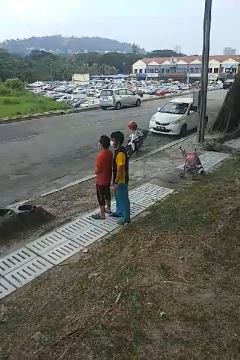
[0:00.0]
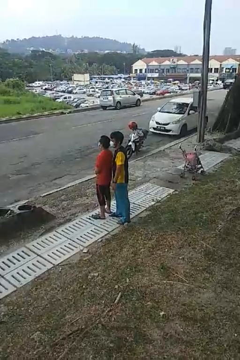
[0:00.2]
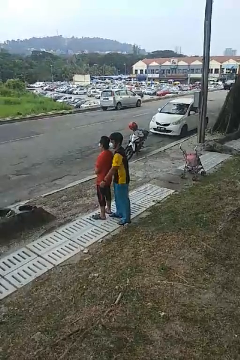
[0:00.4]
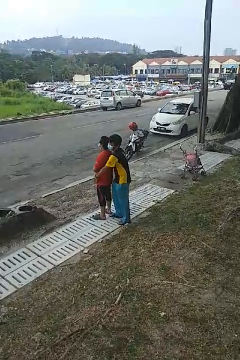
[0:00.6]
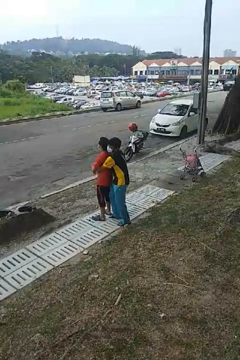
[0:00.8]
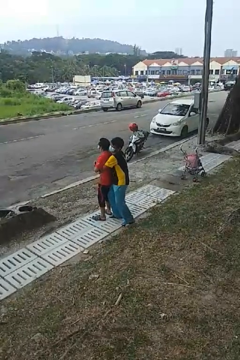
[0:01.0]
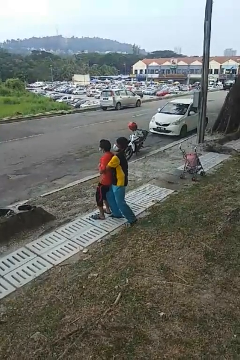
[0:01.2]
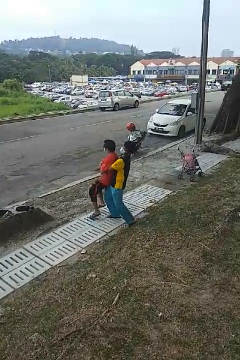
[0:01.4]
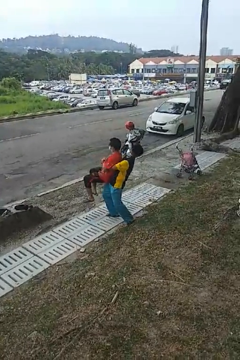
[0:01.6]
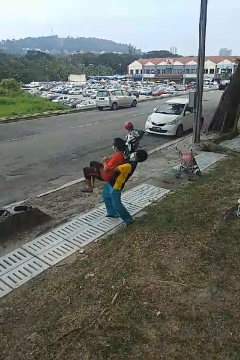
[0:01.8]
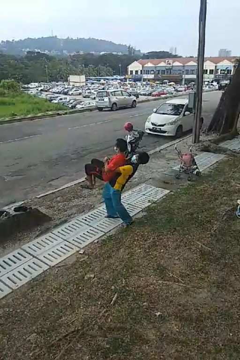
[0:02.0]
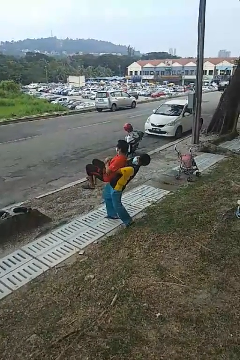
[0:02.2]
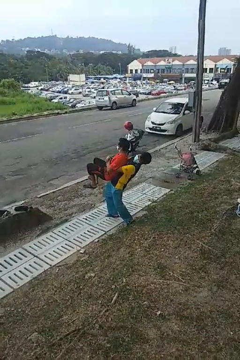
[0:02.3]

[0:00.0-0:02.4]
person picks up person

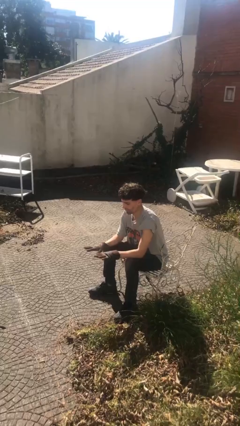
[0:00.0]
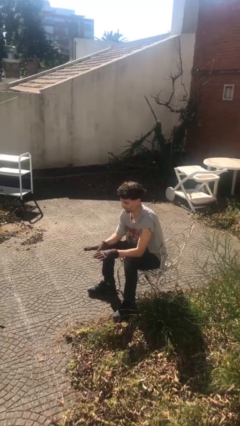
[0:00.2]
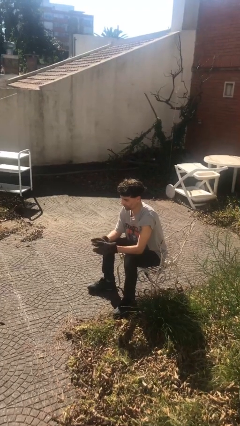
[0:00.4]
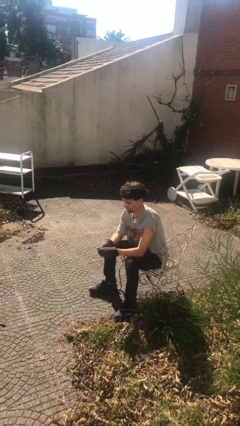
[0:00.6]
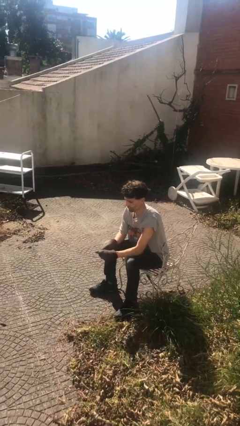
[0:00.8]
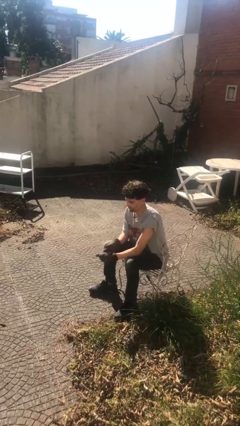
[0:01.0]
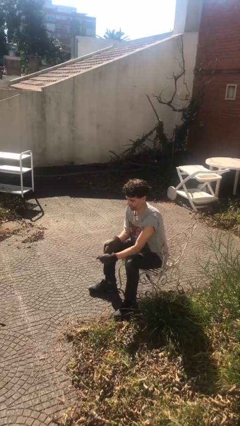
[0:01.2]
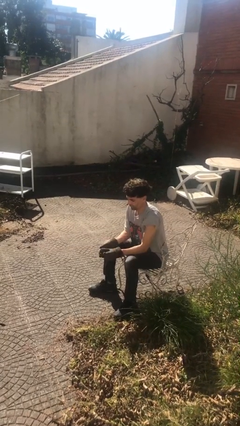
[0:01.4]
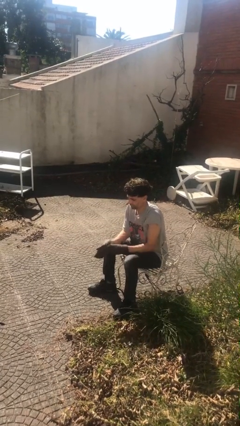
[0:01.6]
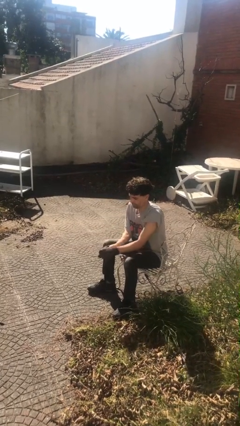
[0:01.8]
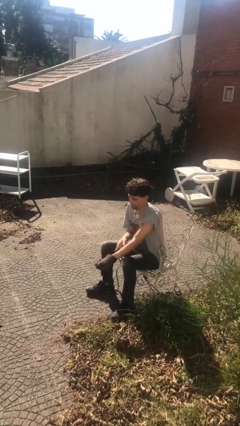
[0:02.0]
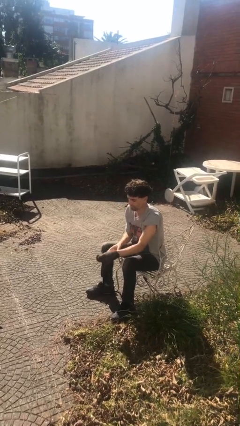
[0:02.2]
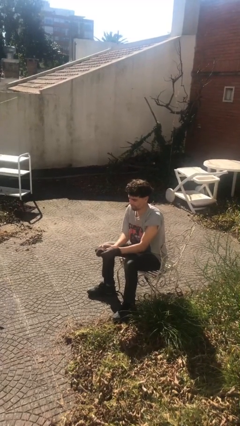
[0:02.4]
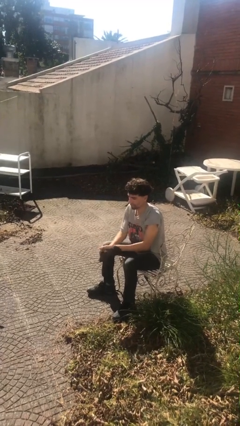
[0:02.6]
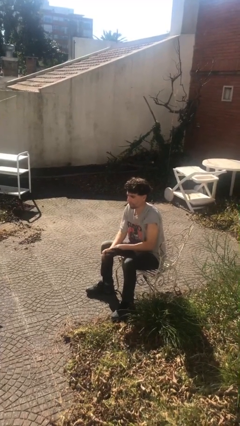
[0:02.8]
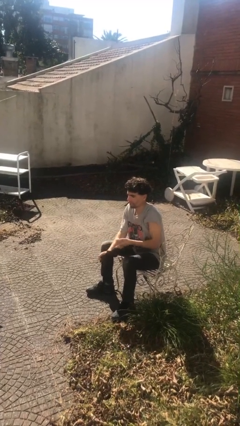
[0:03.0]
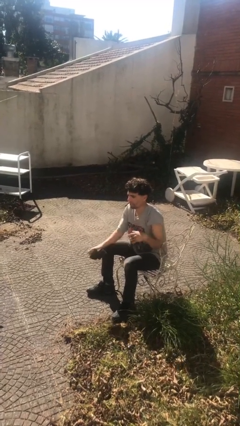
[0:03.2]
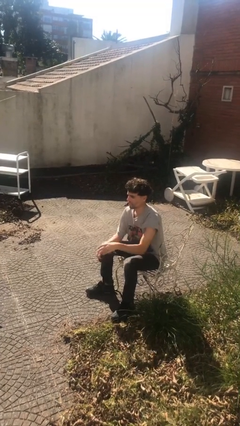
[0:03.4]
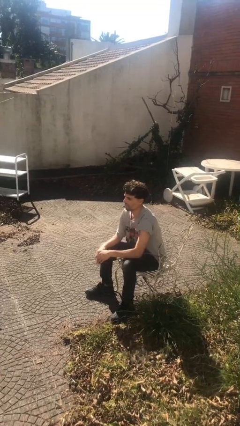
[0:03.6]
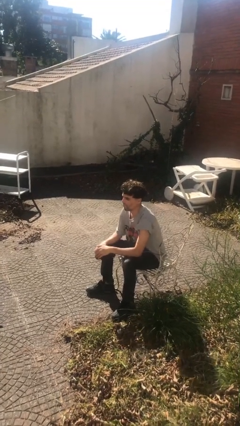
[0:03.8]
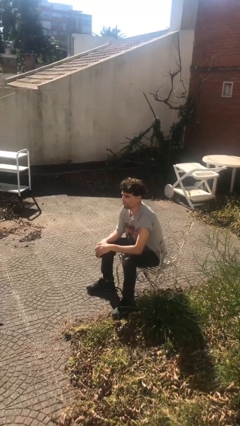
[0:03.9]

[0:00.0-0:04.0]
person takes off gloves

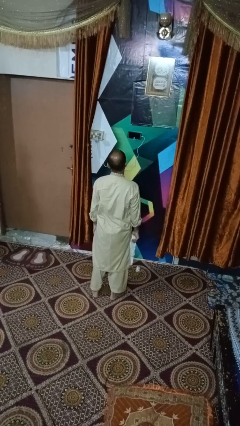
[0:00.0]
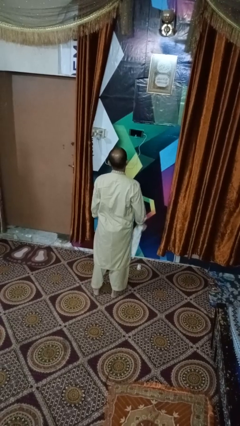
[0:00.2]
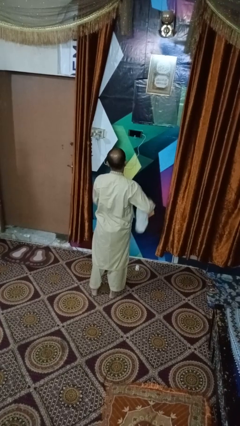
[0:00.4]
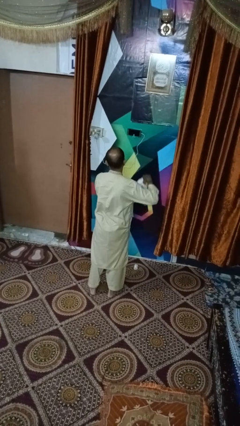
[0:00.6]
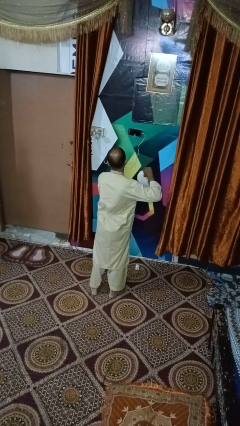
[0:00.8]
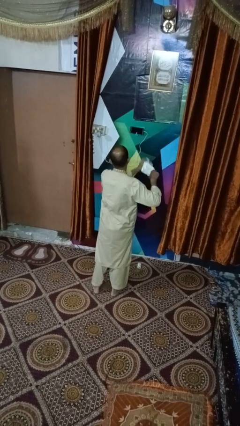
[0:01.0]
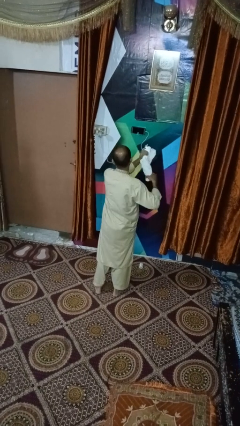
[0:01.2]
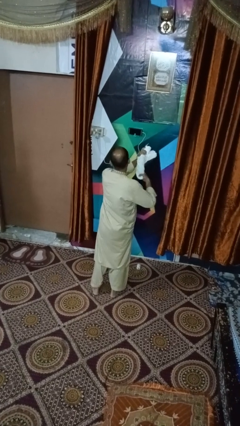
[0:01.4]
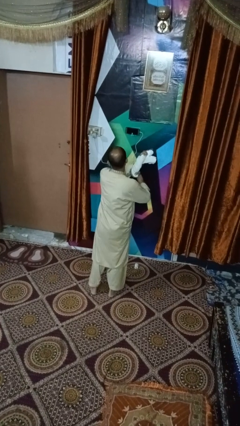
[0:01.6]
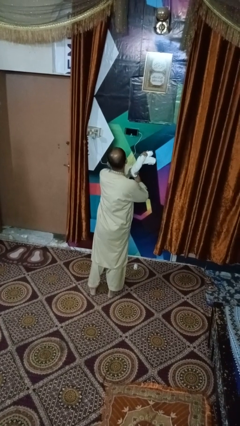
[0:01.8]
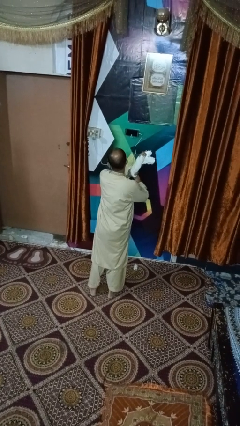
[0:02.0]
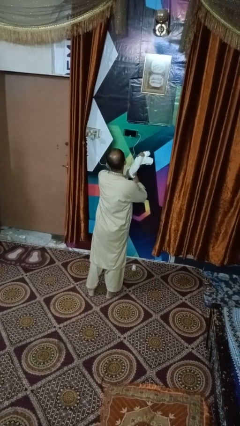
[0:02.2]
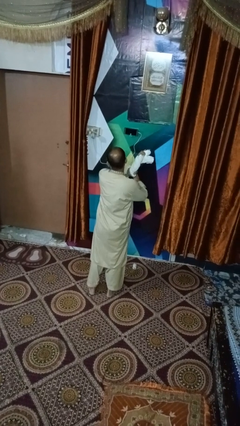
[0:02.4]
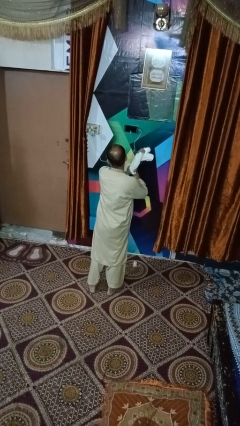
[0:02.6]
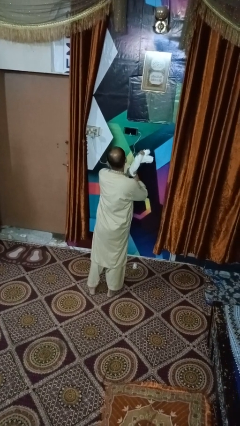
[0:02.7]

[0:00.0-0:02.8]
person squeezes object

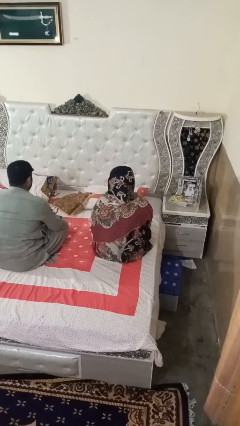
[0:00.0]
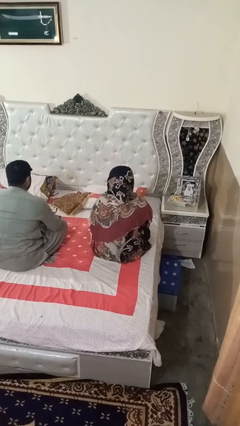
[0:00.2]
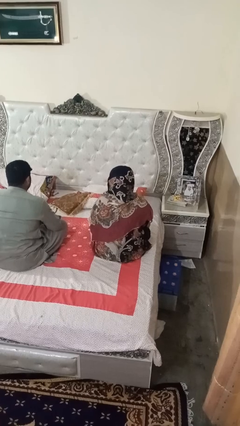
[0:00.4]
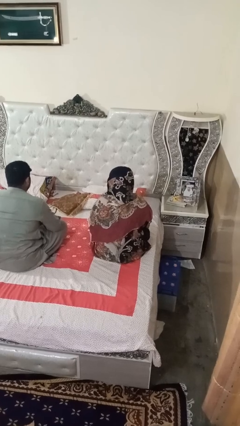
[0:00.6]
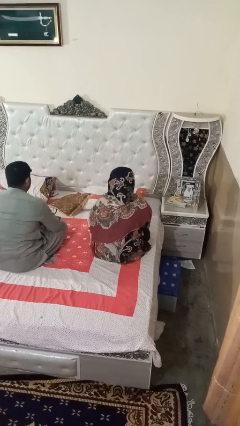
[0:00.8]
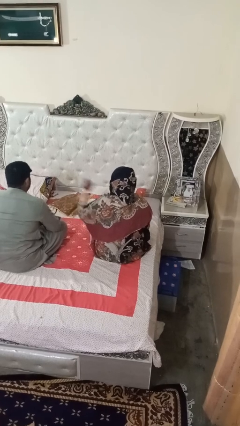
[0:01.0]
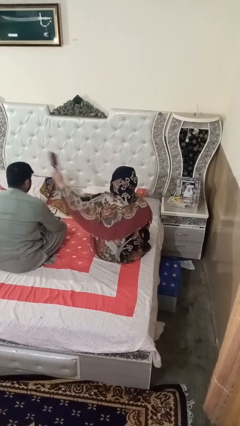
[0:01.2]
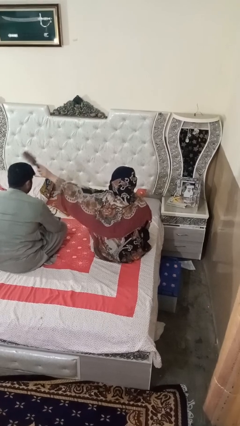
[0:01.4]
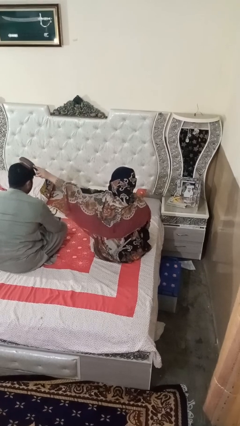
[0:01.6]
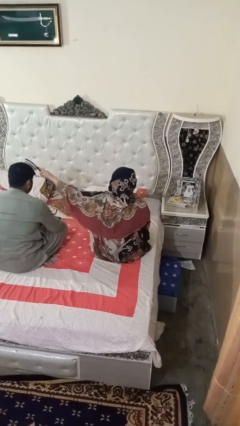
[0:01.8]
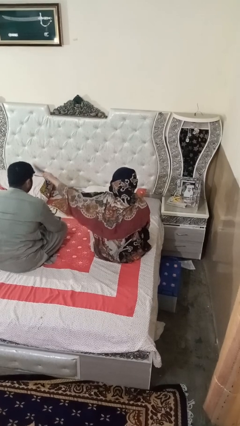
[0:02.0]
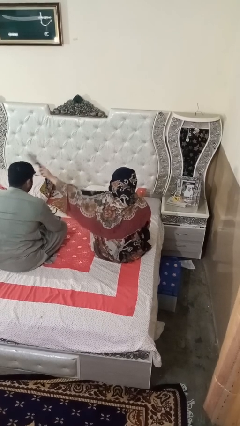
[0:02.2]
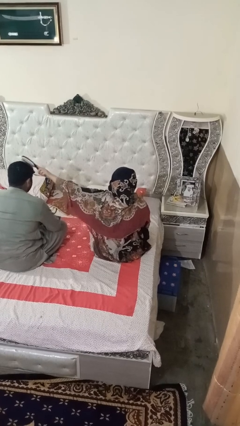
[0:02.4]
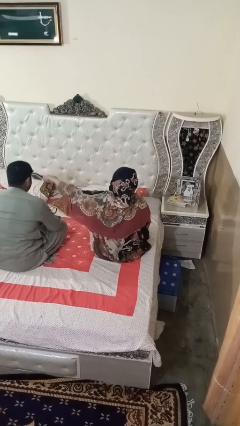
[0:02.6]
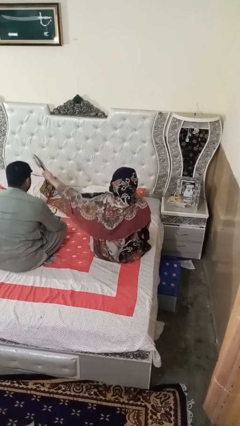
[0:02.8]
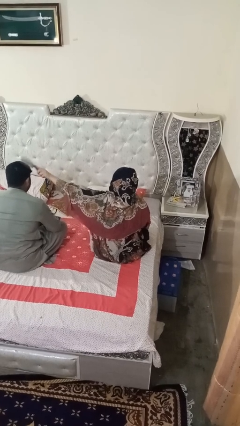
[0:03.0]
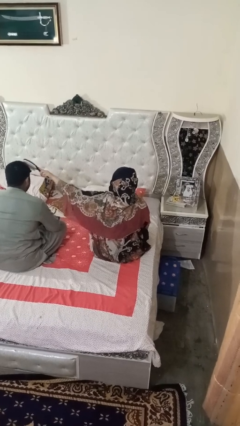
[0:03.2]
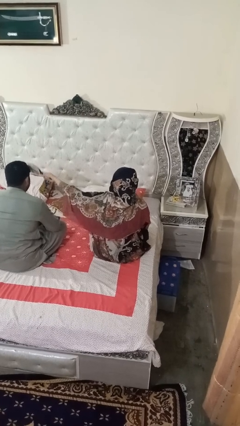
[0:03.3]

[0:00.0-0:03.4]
person brushes hair of person

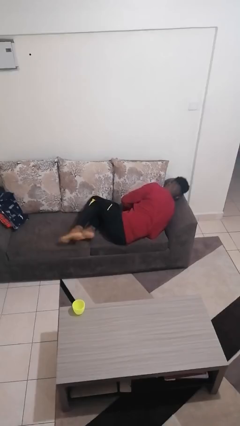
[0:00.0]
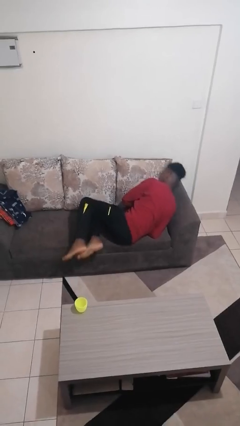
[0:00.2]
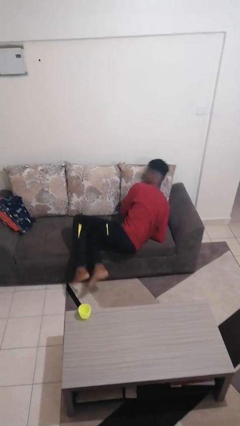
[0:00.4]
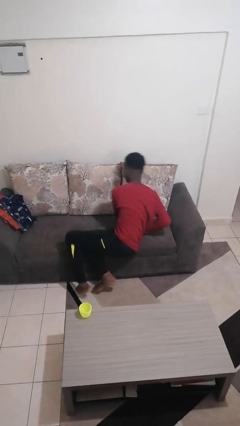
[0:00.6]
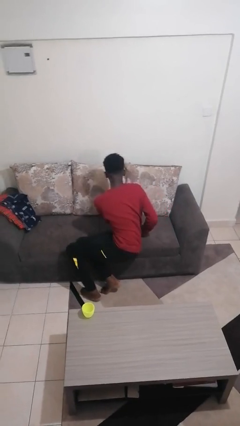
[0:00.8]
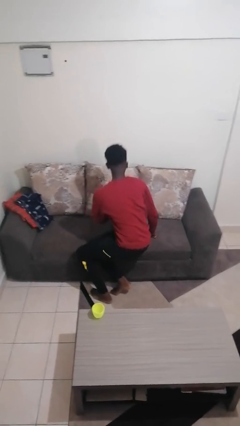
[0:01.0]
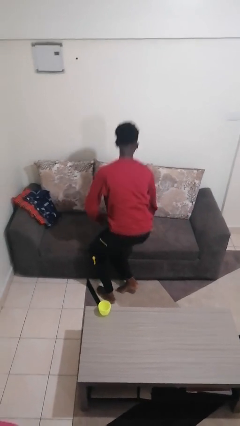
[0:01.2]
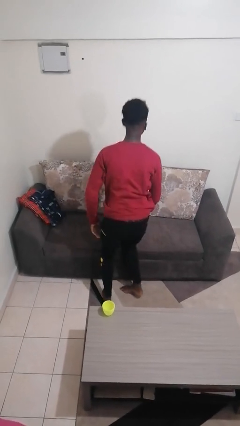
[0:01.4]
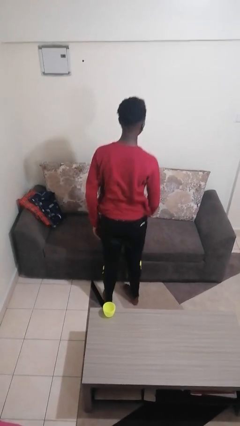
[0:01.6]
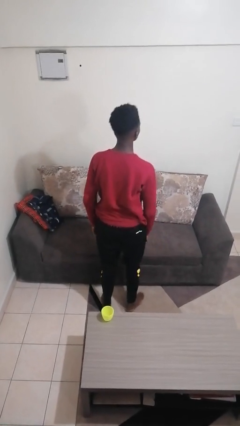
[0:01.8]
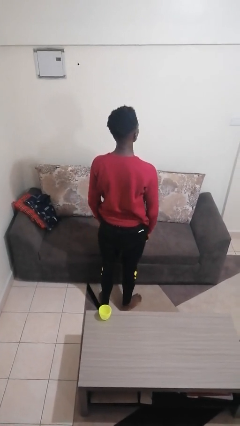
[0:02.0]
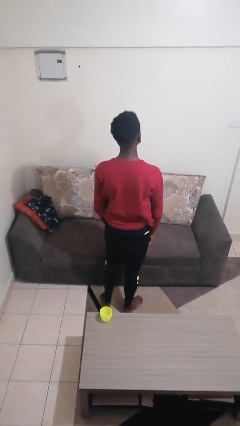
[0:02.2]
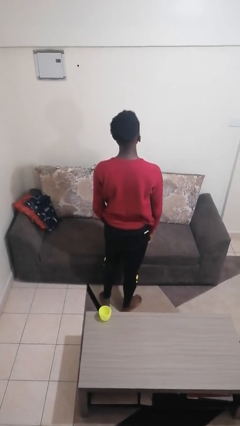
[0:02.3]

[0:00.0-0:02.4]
person stands up

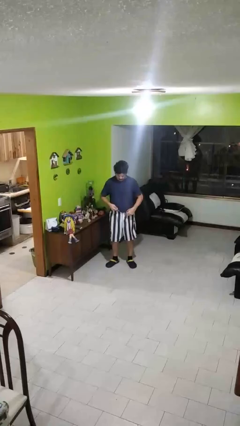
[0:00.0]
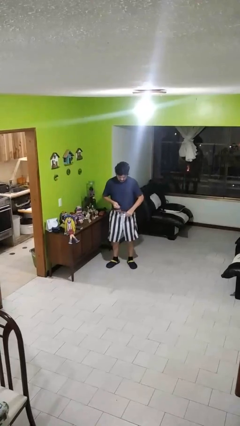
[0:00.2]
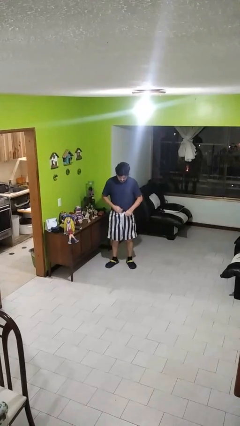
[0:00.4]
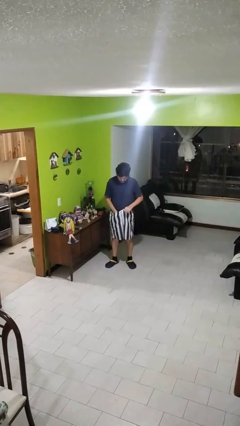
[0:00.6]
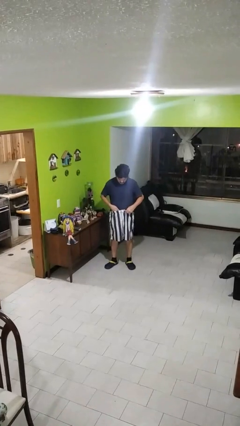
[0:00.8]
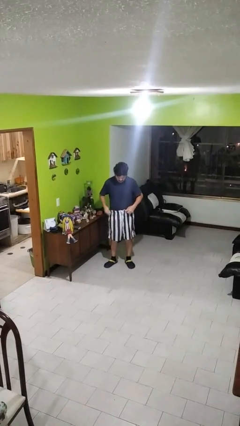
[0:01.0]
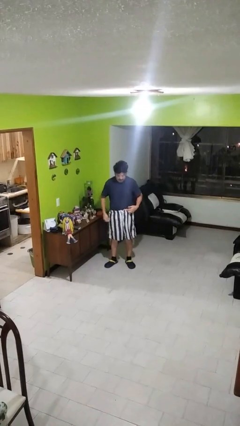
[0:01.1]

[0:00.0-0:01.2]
person tucks in shirt

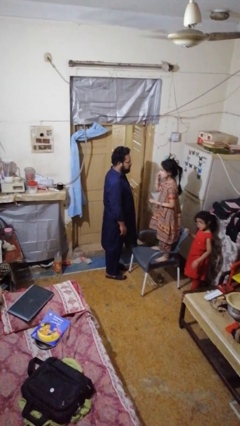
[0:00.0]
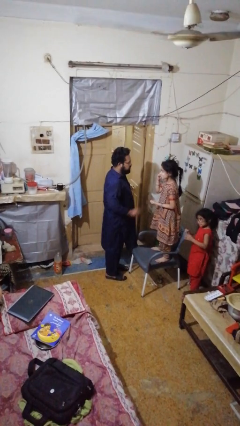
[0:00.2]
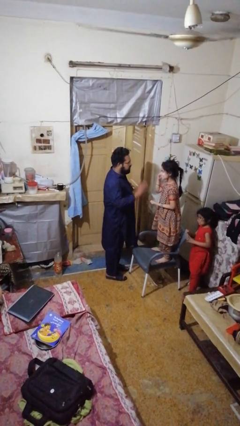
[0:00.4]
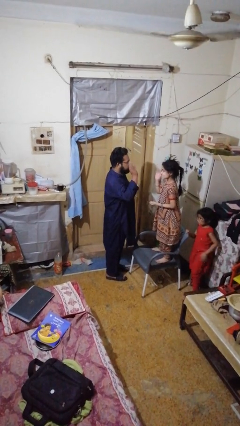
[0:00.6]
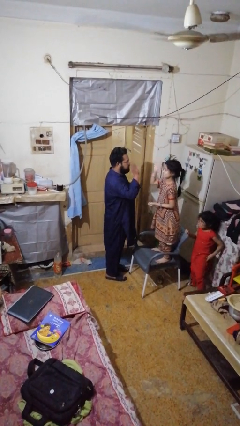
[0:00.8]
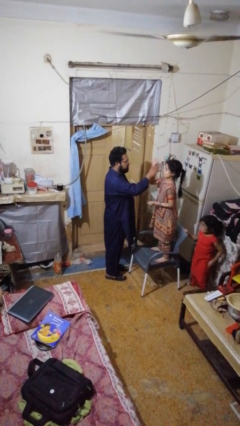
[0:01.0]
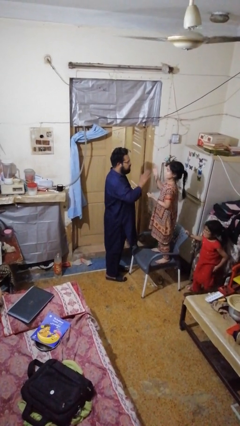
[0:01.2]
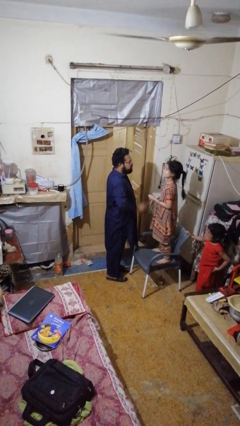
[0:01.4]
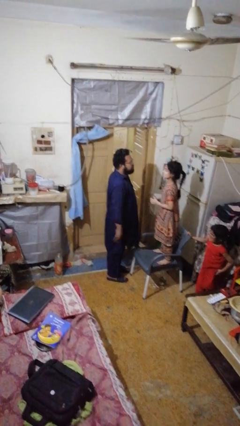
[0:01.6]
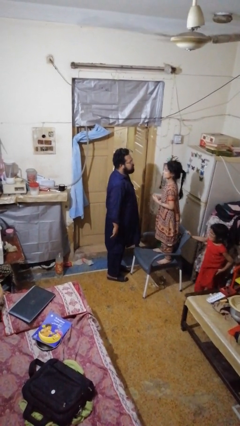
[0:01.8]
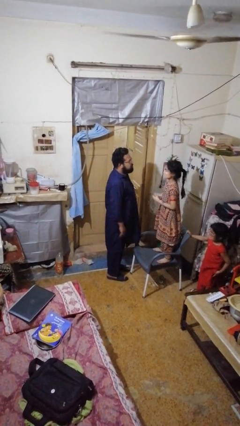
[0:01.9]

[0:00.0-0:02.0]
person highfives hand

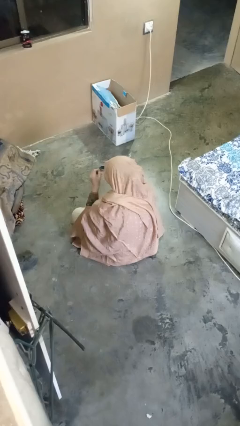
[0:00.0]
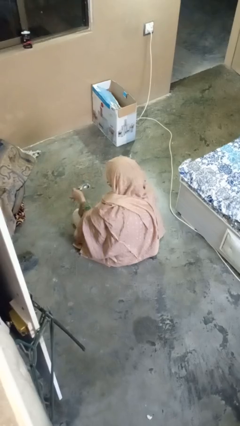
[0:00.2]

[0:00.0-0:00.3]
person puts on glasses
